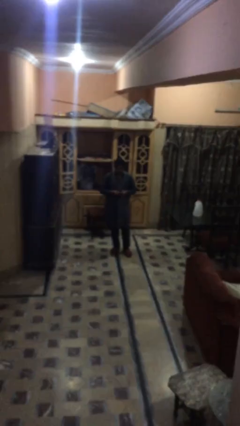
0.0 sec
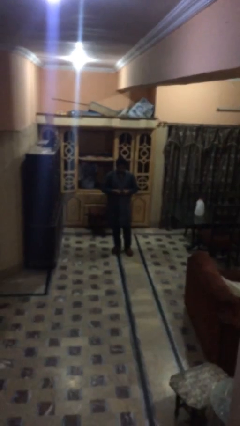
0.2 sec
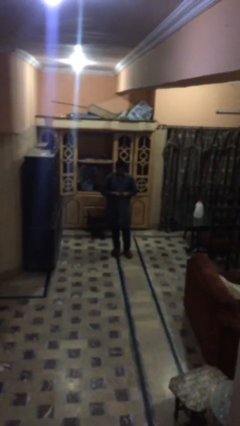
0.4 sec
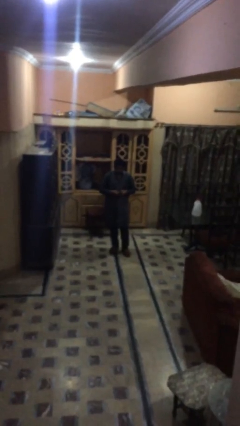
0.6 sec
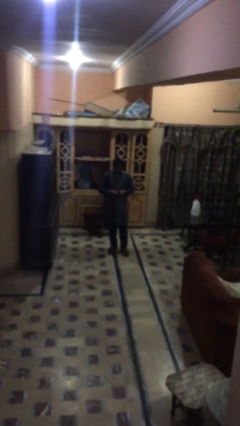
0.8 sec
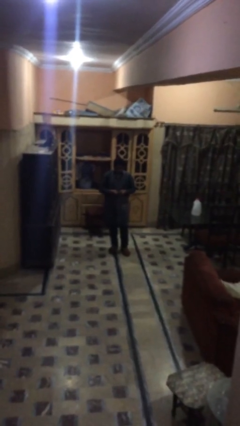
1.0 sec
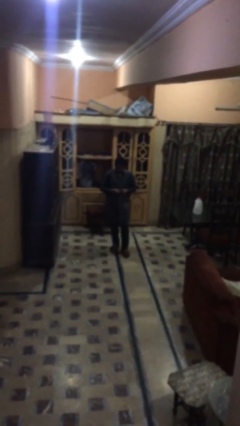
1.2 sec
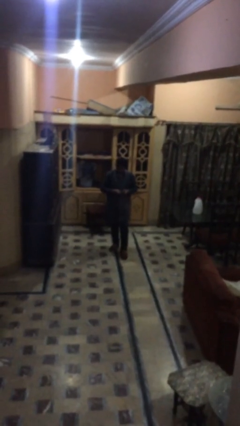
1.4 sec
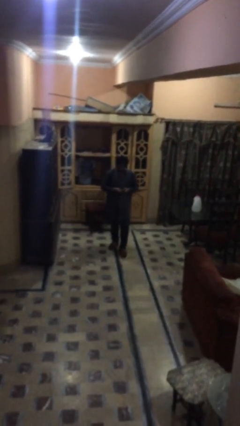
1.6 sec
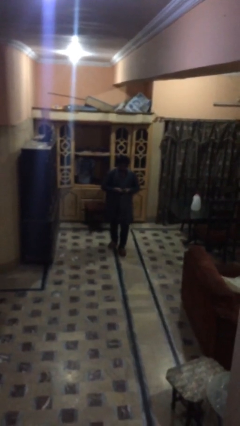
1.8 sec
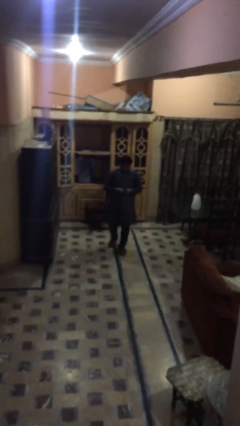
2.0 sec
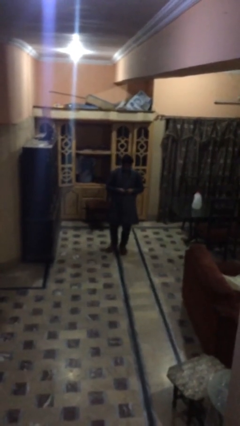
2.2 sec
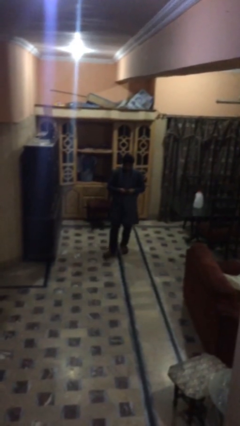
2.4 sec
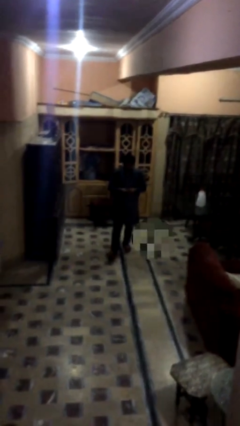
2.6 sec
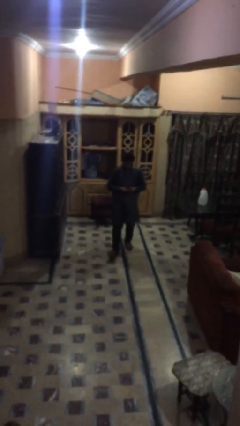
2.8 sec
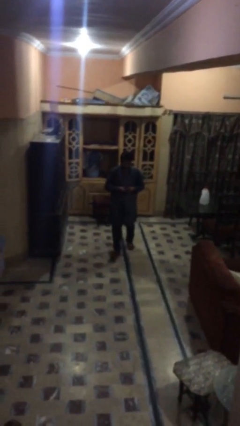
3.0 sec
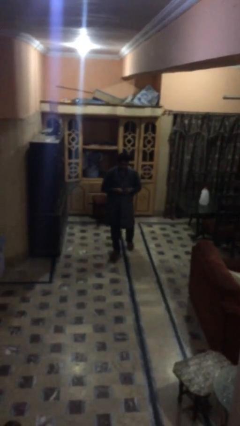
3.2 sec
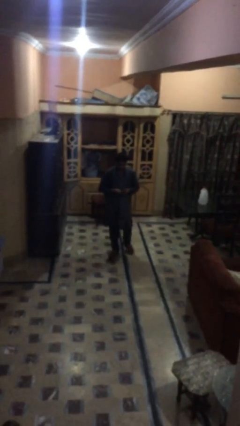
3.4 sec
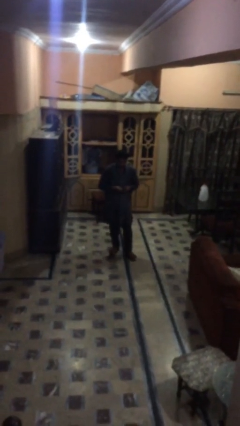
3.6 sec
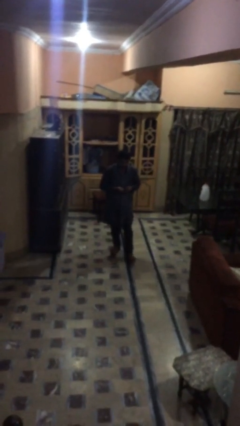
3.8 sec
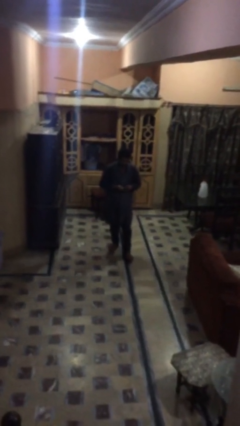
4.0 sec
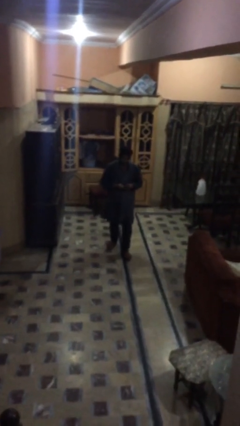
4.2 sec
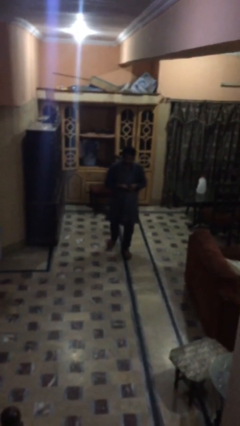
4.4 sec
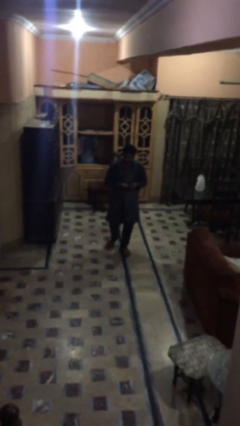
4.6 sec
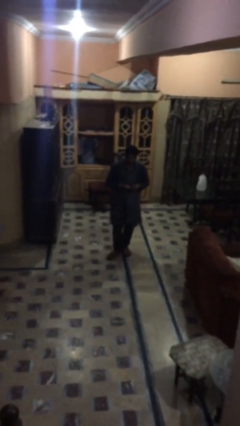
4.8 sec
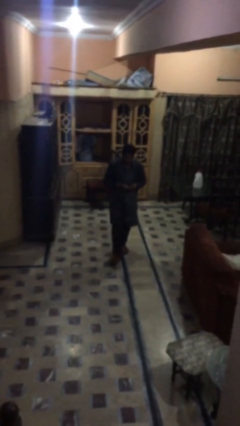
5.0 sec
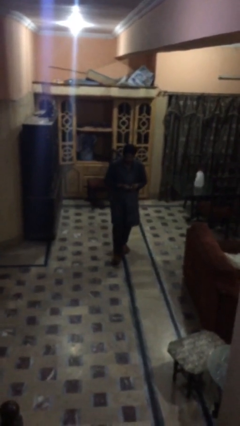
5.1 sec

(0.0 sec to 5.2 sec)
person texts on phone

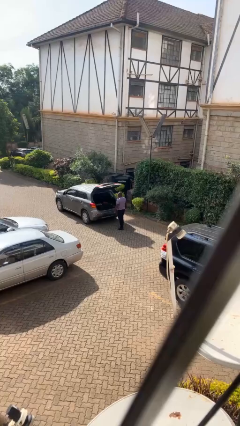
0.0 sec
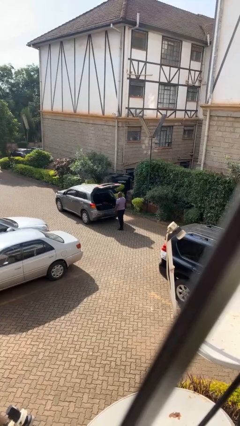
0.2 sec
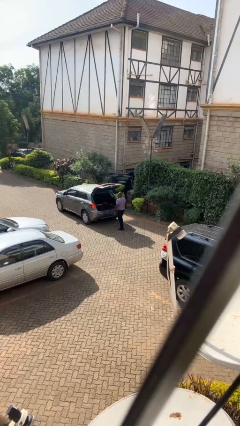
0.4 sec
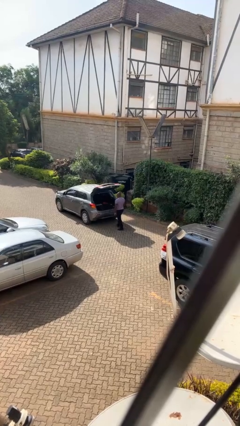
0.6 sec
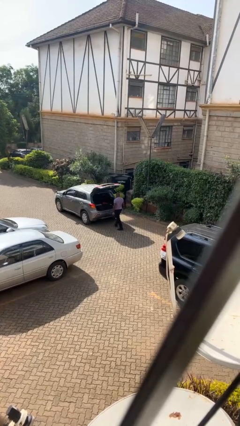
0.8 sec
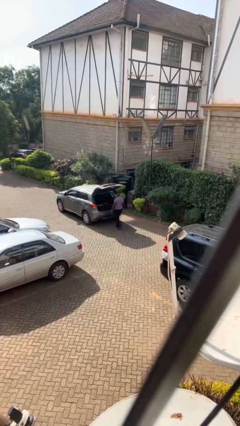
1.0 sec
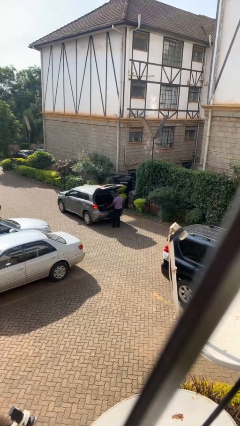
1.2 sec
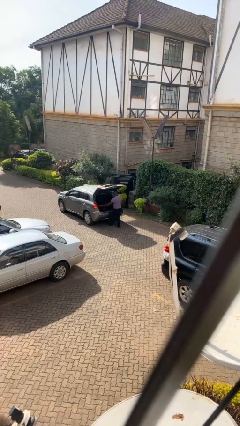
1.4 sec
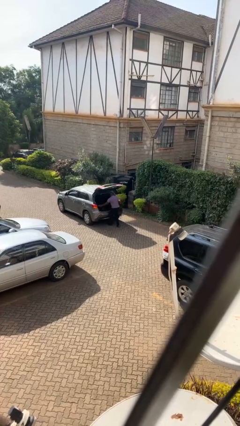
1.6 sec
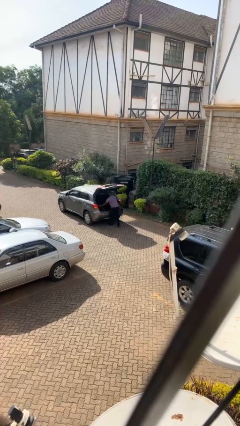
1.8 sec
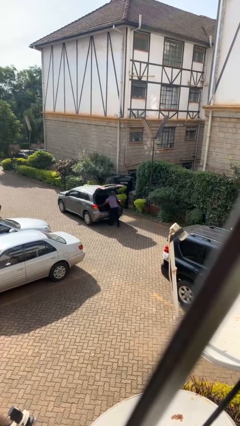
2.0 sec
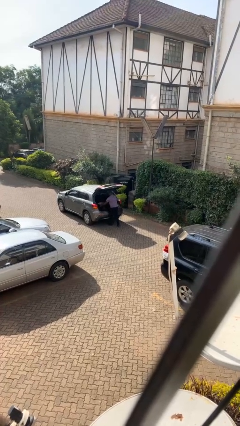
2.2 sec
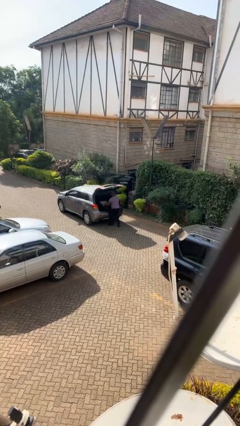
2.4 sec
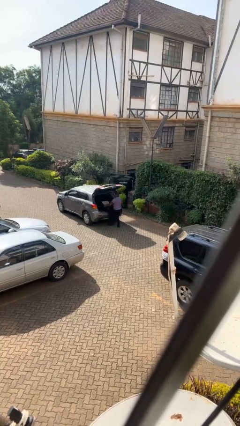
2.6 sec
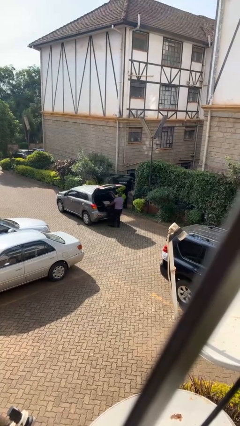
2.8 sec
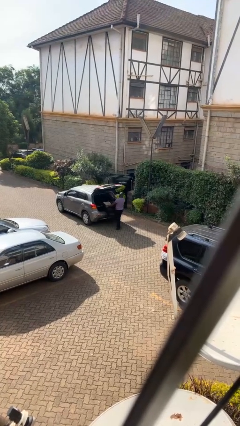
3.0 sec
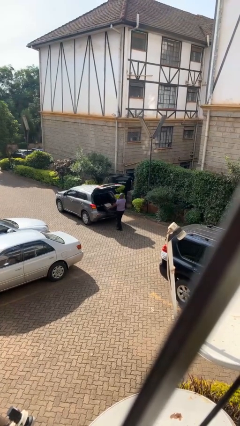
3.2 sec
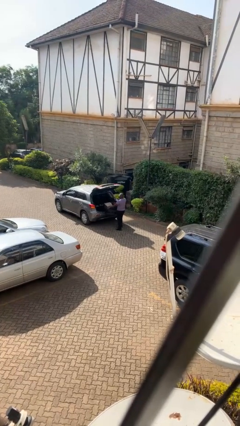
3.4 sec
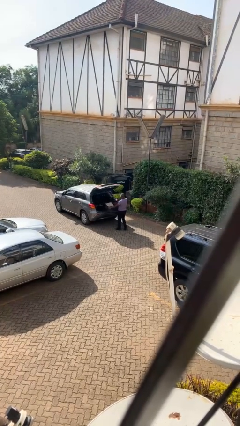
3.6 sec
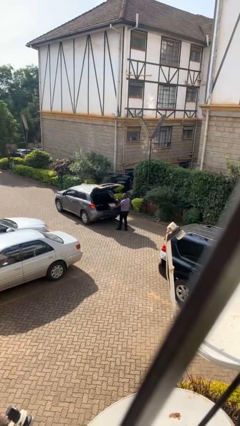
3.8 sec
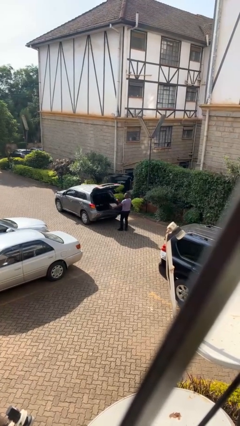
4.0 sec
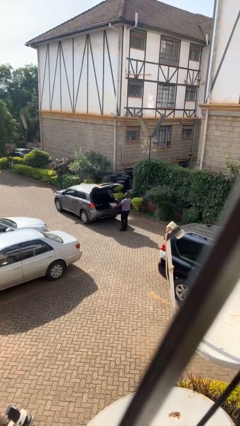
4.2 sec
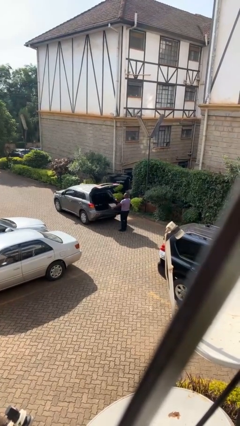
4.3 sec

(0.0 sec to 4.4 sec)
person unloads car

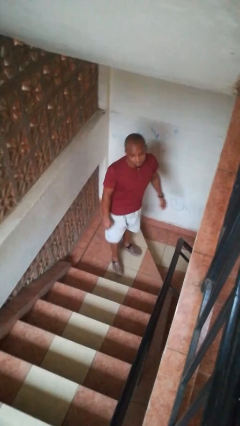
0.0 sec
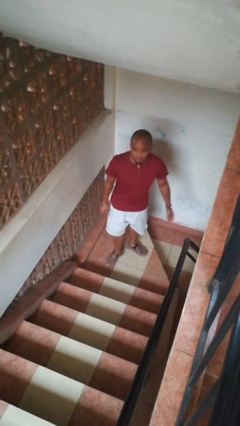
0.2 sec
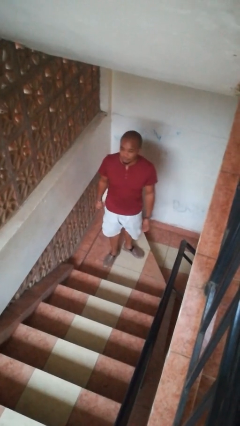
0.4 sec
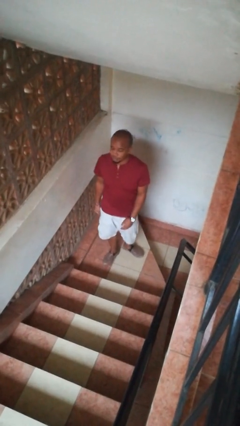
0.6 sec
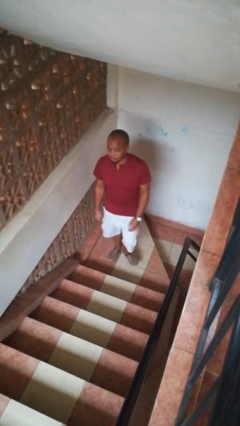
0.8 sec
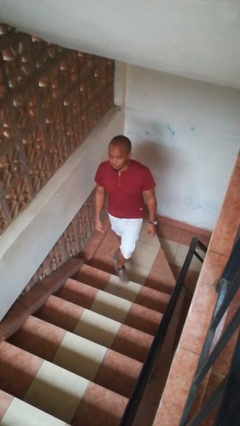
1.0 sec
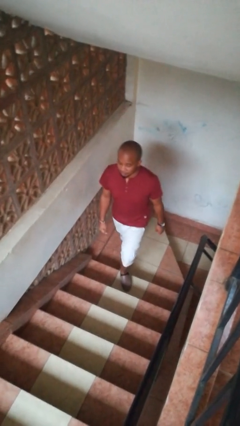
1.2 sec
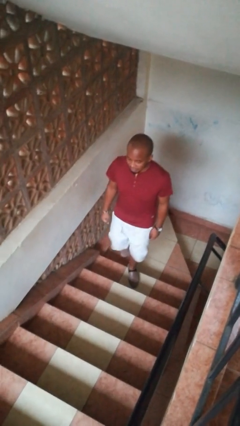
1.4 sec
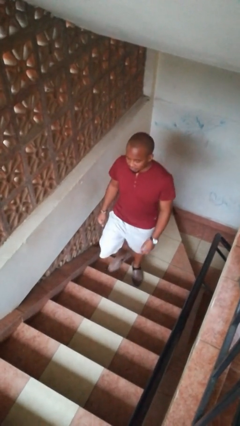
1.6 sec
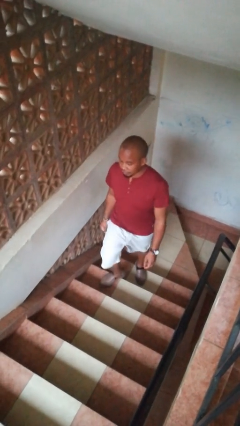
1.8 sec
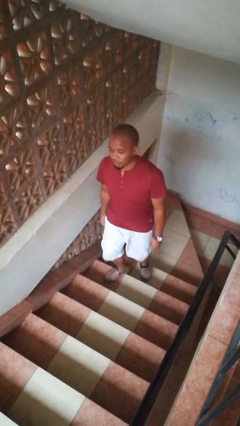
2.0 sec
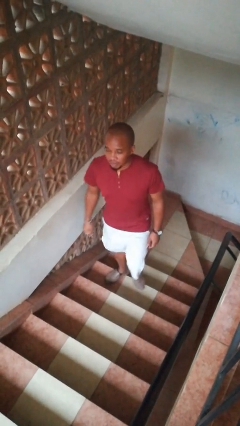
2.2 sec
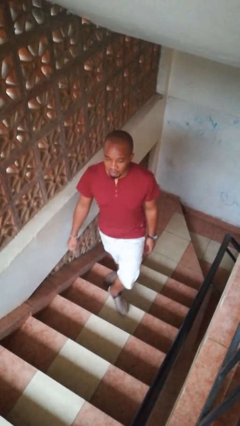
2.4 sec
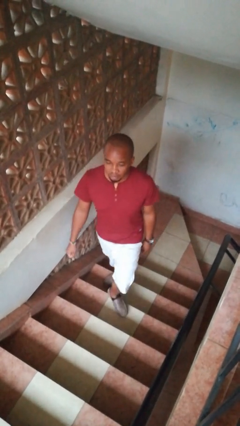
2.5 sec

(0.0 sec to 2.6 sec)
person climbs up stairs

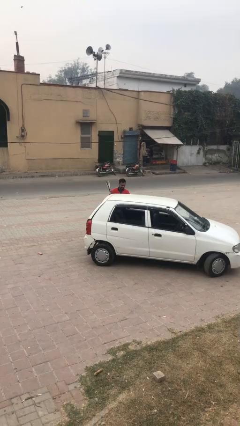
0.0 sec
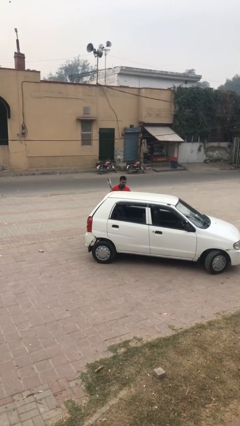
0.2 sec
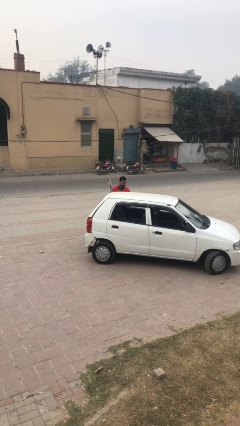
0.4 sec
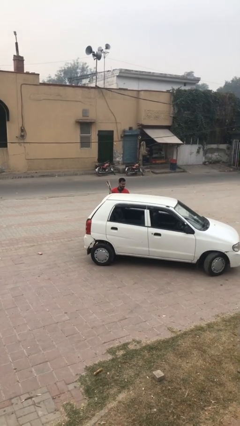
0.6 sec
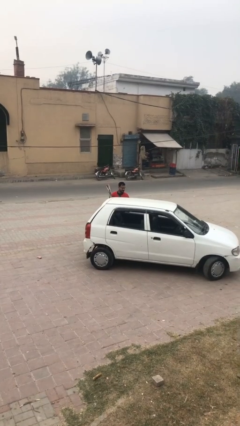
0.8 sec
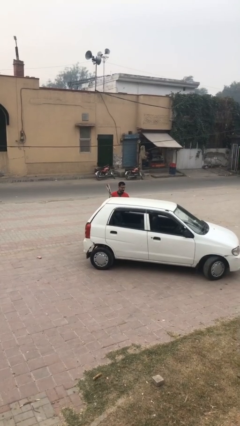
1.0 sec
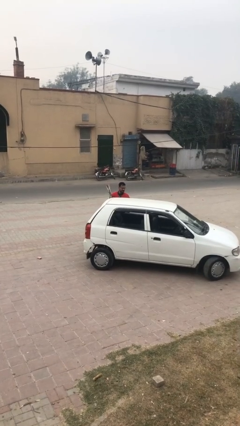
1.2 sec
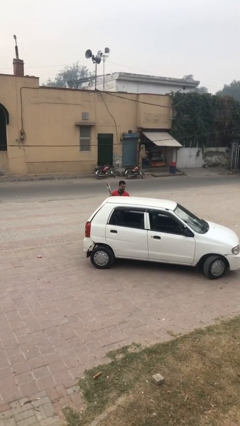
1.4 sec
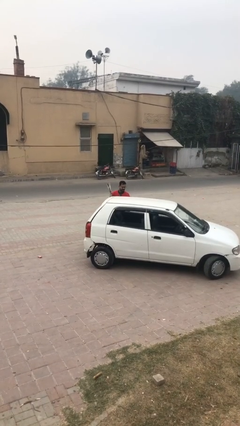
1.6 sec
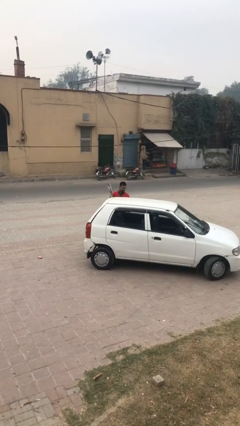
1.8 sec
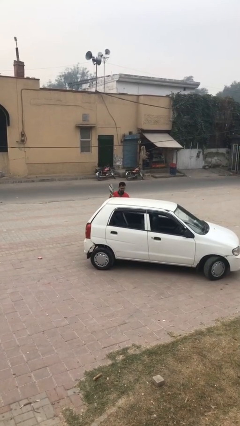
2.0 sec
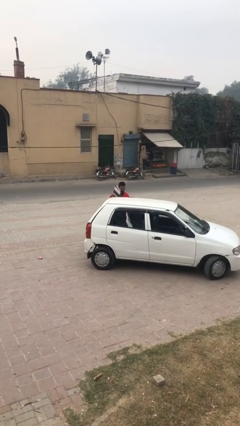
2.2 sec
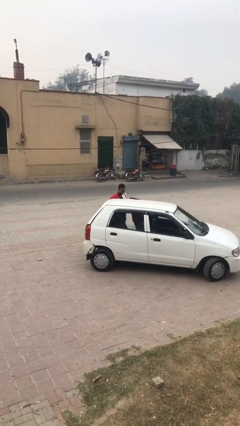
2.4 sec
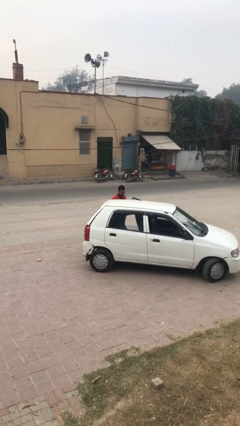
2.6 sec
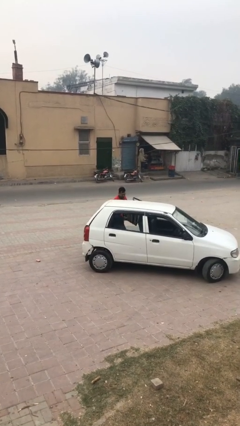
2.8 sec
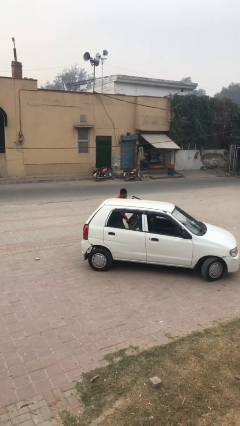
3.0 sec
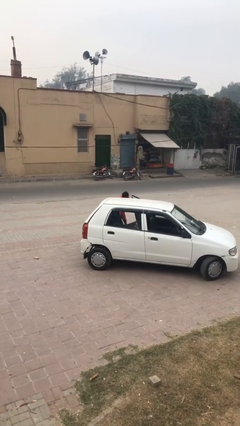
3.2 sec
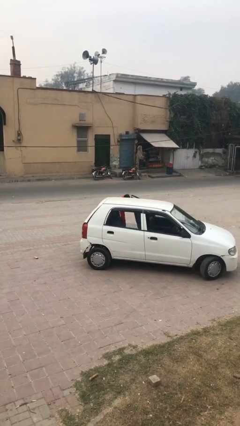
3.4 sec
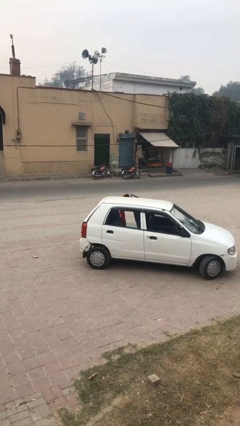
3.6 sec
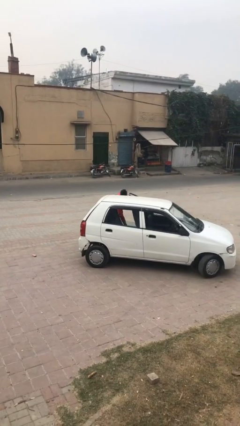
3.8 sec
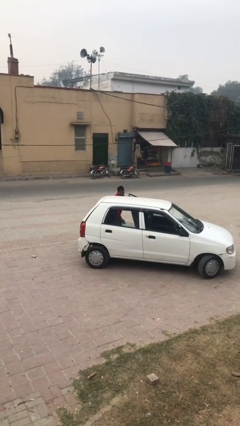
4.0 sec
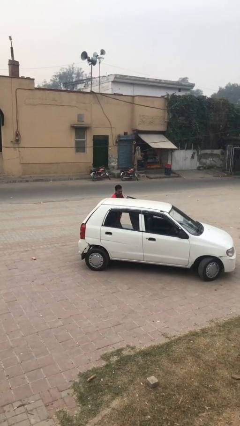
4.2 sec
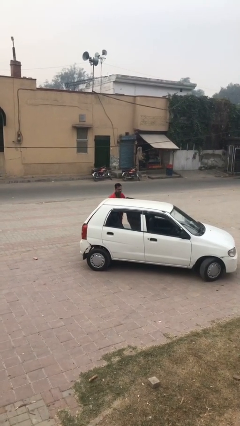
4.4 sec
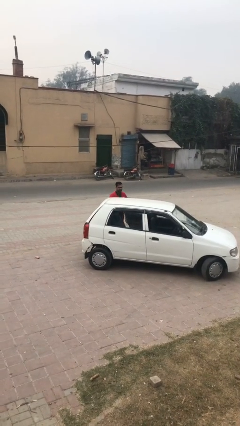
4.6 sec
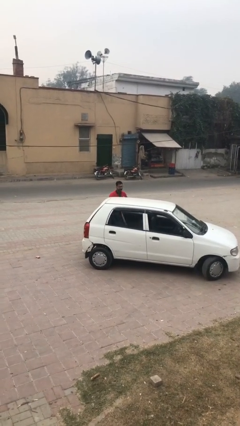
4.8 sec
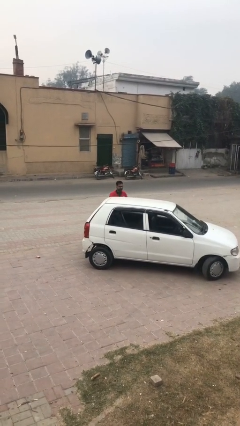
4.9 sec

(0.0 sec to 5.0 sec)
person loads car

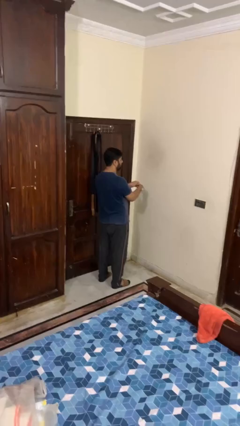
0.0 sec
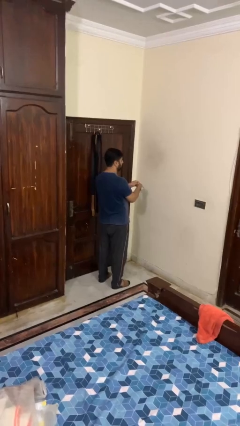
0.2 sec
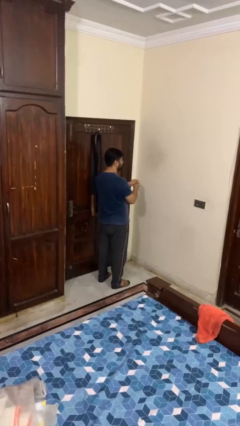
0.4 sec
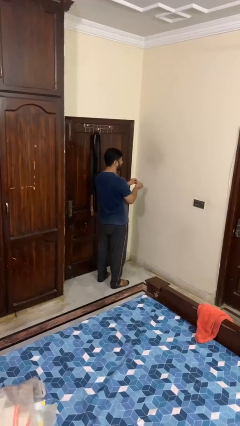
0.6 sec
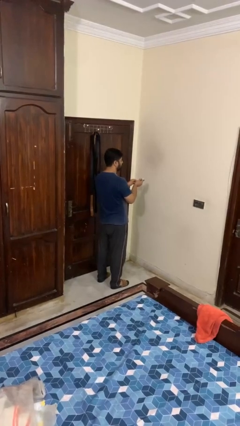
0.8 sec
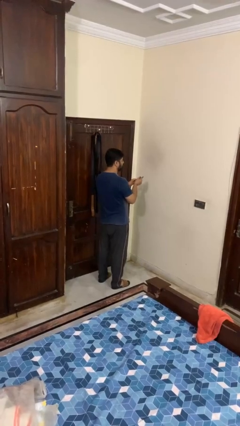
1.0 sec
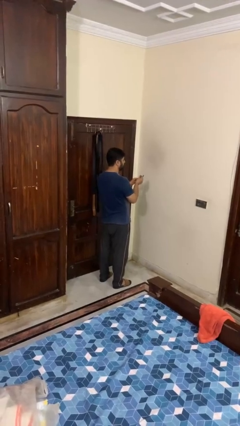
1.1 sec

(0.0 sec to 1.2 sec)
person takes off wristwatch
